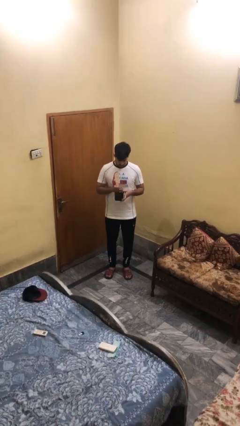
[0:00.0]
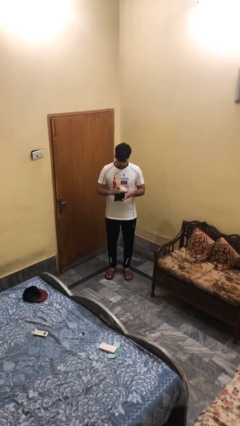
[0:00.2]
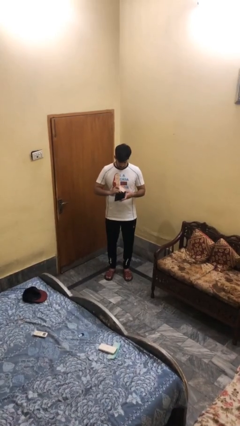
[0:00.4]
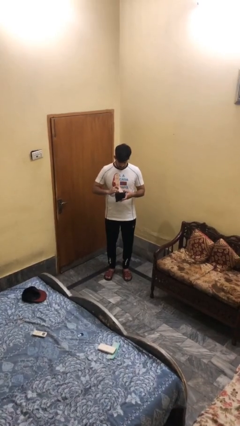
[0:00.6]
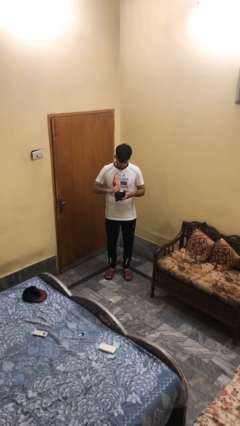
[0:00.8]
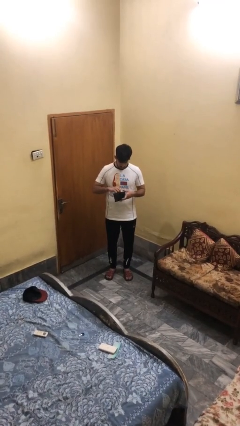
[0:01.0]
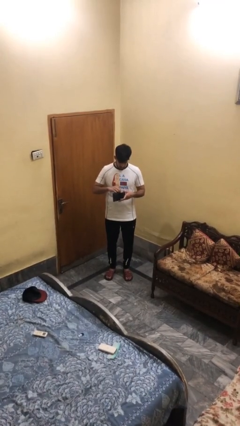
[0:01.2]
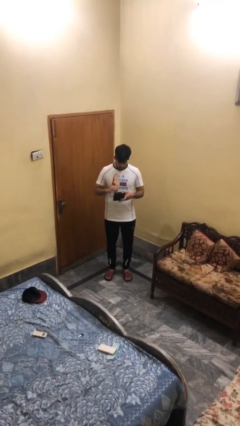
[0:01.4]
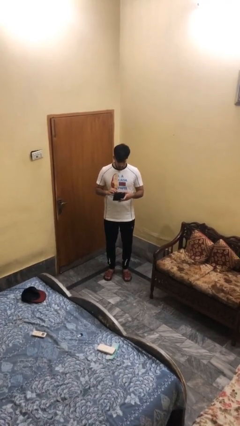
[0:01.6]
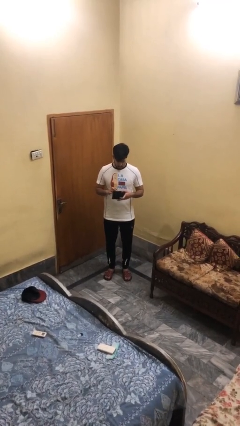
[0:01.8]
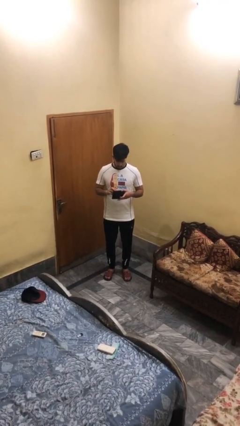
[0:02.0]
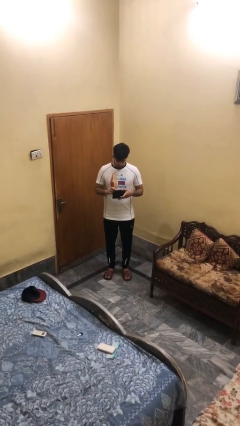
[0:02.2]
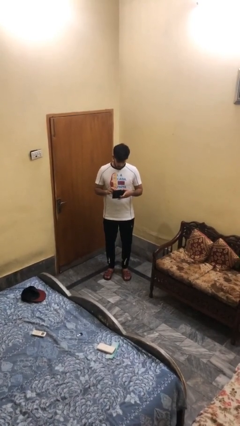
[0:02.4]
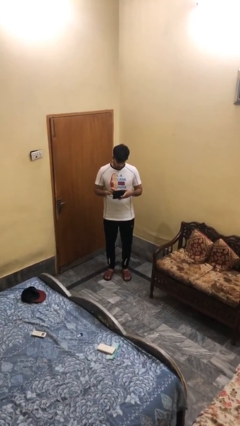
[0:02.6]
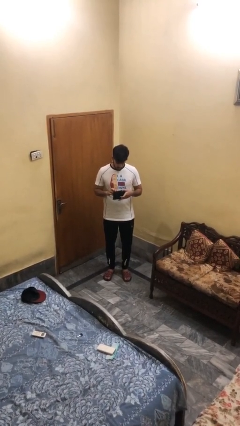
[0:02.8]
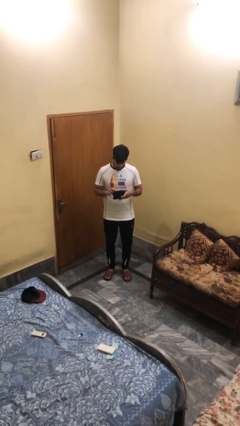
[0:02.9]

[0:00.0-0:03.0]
person puts object into purse

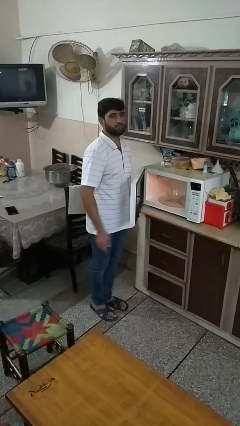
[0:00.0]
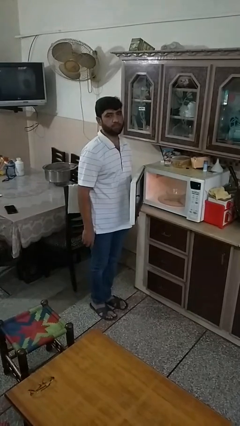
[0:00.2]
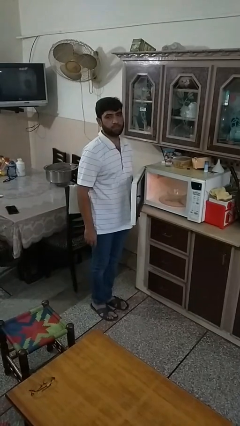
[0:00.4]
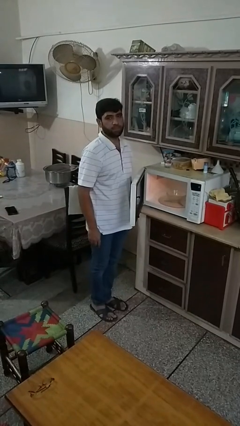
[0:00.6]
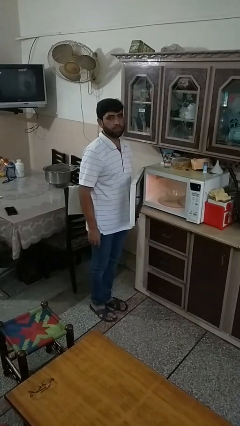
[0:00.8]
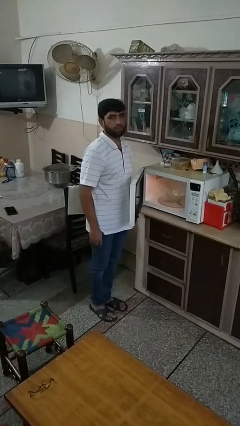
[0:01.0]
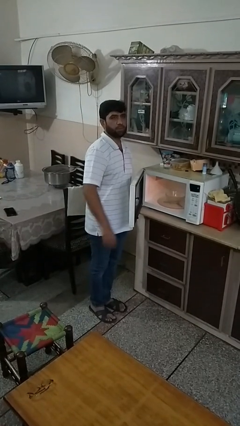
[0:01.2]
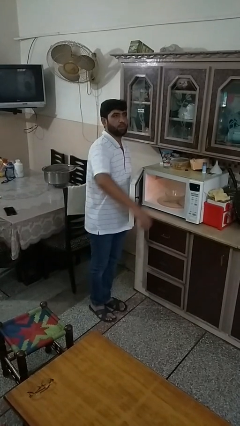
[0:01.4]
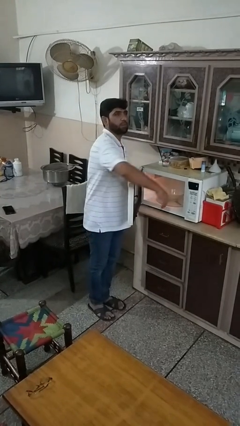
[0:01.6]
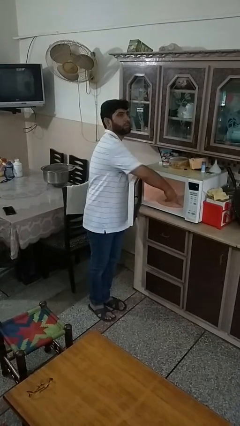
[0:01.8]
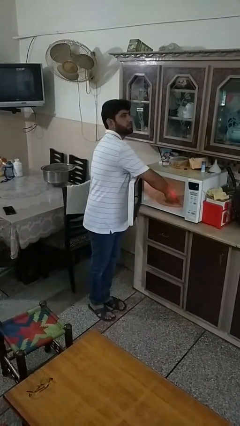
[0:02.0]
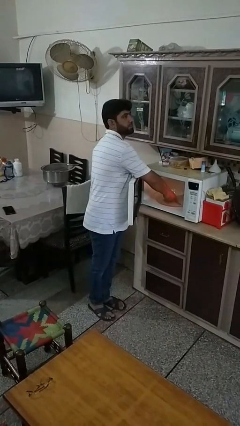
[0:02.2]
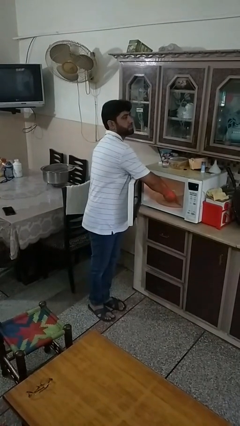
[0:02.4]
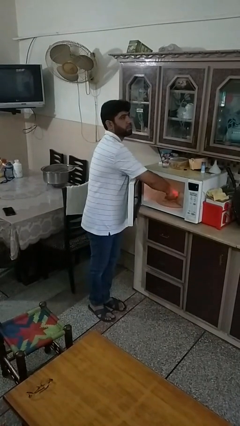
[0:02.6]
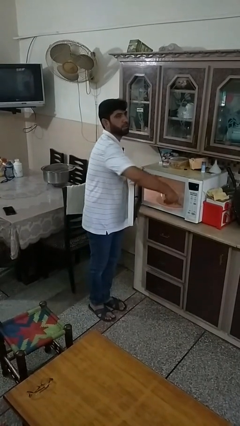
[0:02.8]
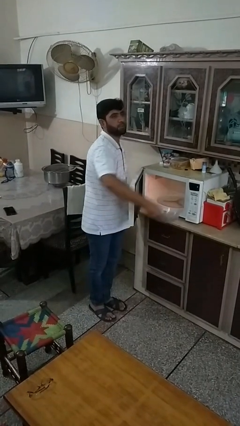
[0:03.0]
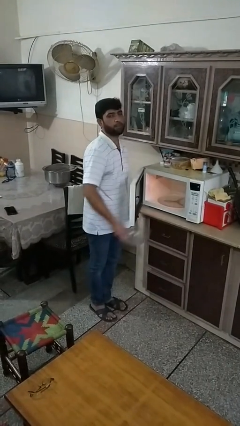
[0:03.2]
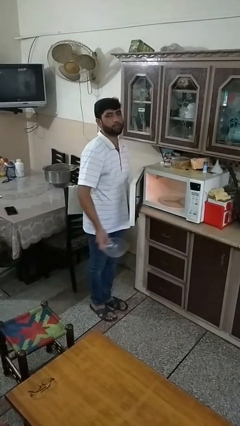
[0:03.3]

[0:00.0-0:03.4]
person takes object from microwave

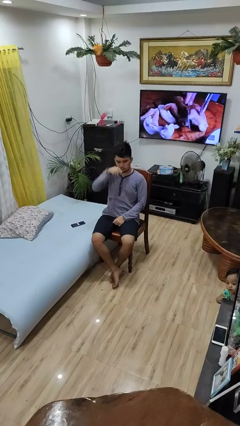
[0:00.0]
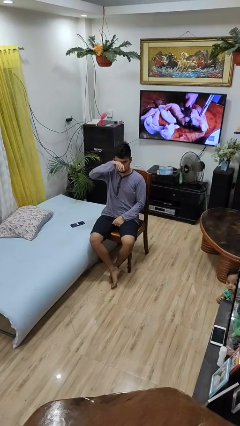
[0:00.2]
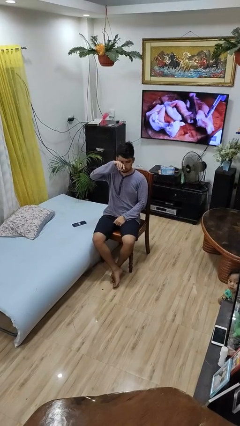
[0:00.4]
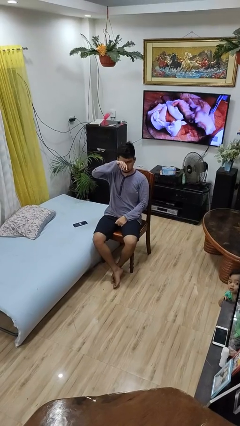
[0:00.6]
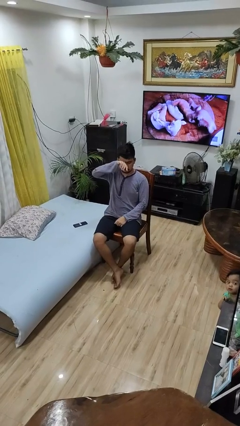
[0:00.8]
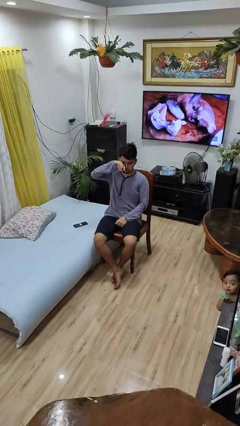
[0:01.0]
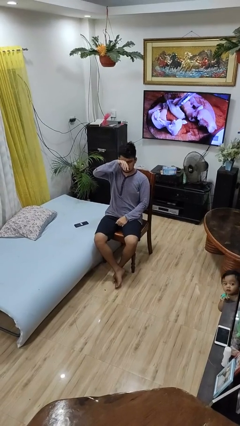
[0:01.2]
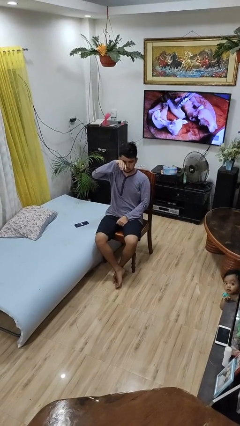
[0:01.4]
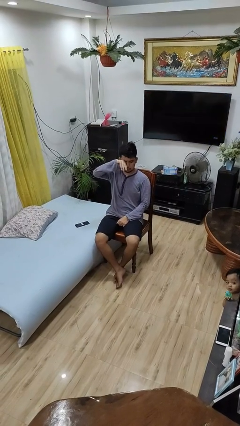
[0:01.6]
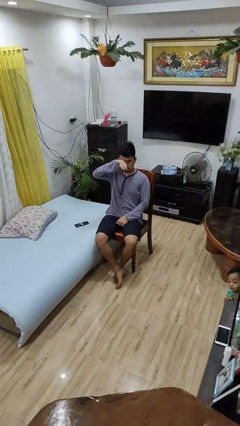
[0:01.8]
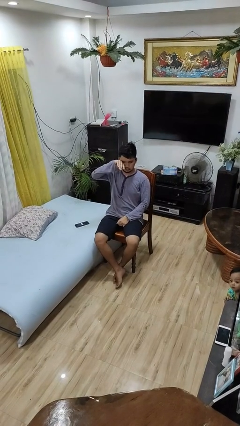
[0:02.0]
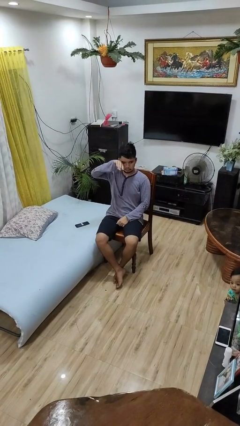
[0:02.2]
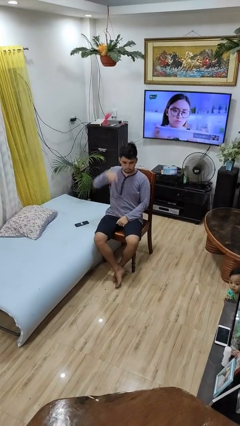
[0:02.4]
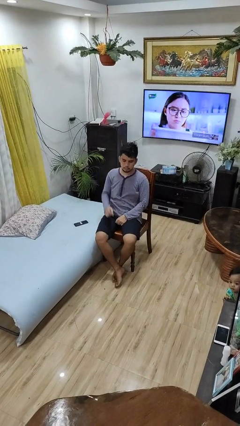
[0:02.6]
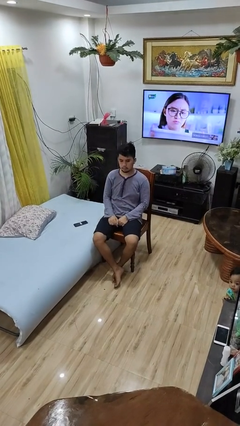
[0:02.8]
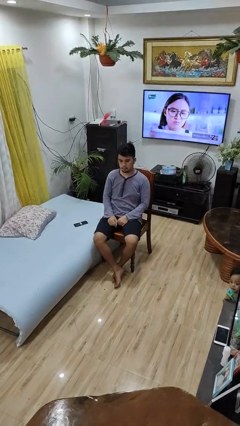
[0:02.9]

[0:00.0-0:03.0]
person rubs eyes

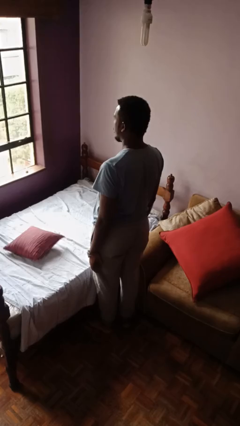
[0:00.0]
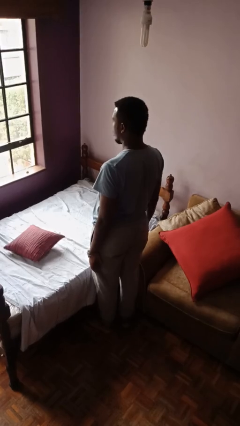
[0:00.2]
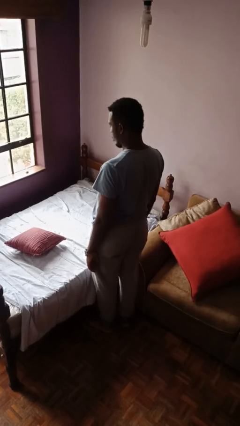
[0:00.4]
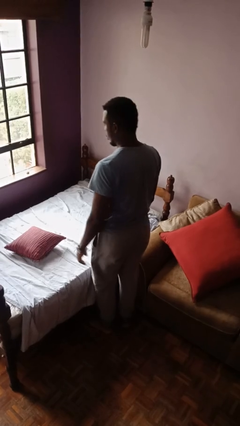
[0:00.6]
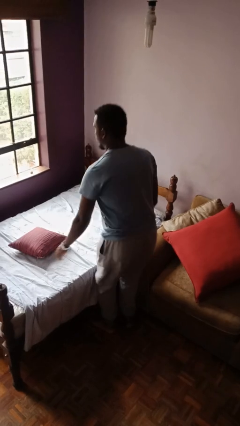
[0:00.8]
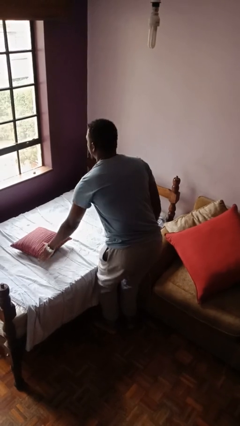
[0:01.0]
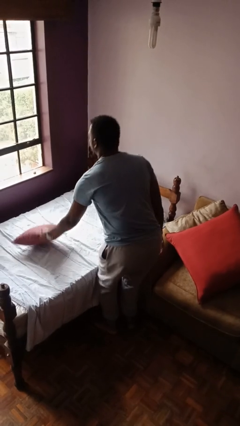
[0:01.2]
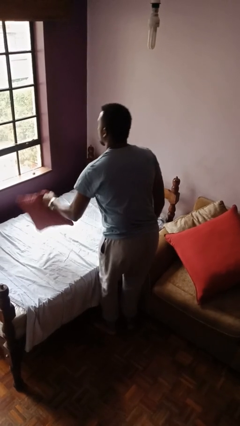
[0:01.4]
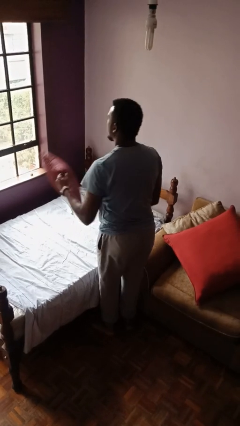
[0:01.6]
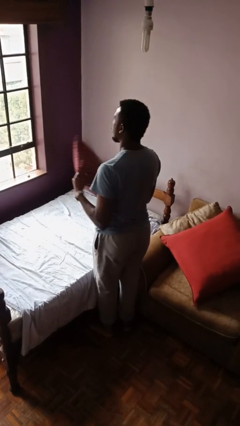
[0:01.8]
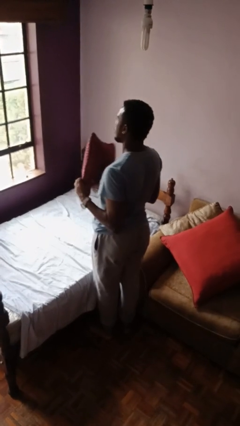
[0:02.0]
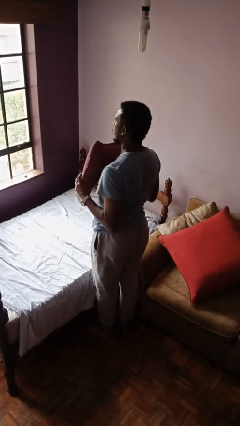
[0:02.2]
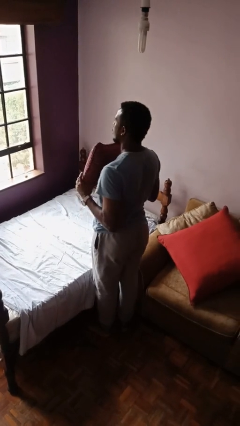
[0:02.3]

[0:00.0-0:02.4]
person picks up object from bed

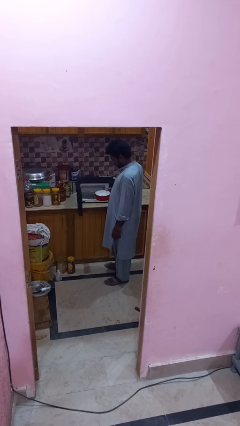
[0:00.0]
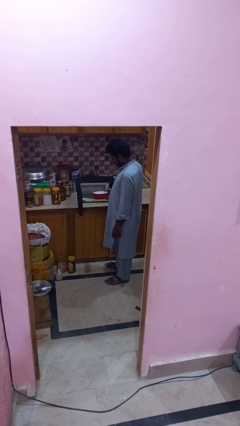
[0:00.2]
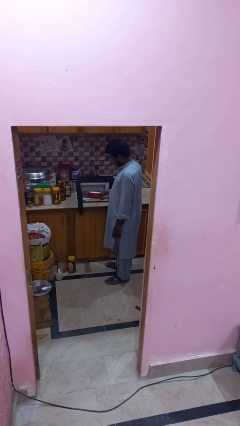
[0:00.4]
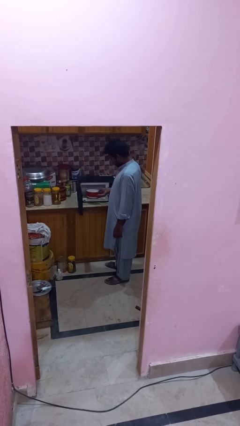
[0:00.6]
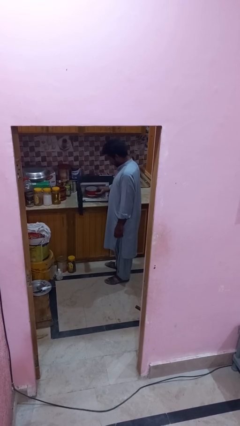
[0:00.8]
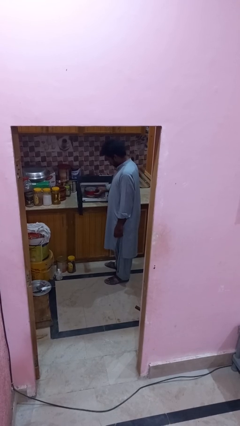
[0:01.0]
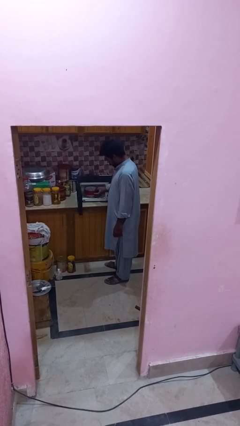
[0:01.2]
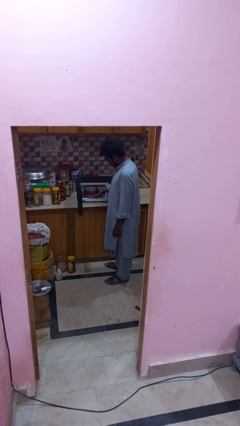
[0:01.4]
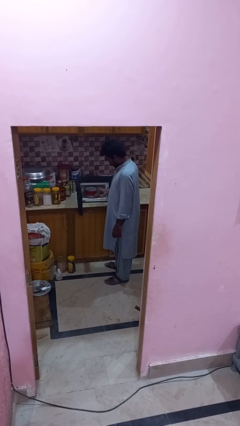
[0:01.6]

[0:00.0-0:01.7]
person puts object into microwave

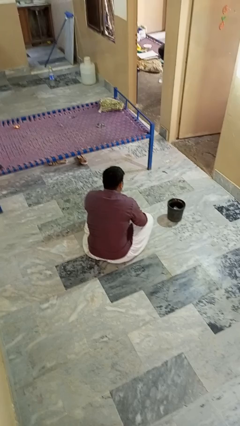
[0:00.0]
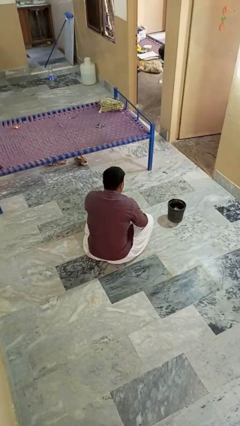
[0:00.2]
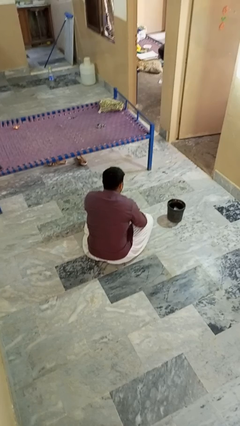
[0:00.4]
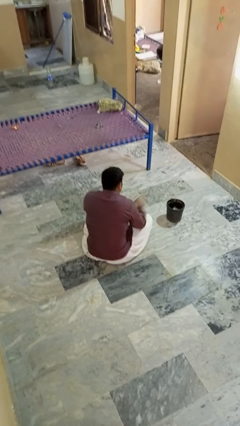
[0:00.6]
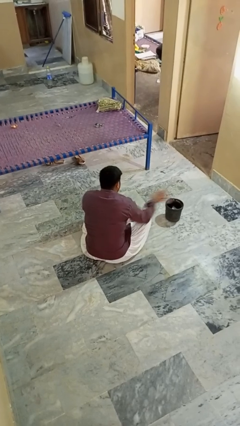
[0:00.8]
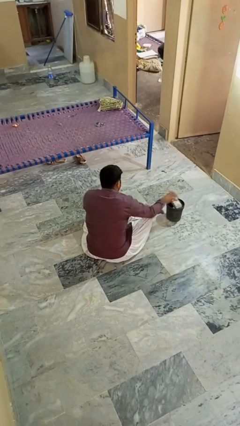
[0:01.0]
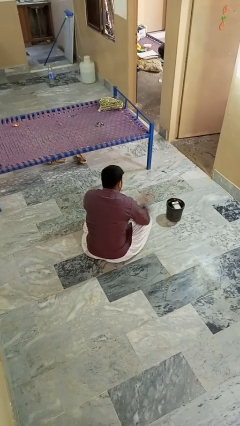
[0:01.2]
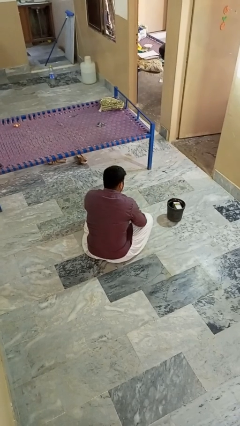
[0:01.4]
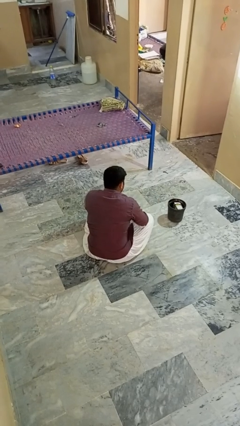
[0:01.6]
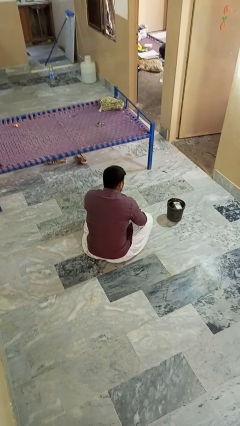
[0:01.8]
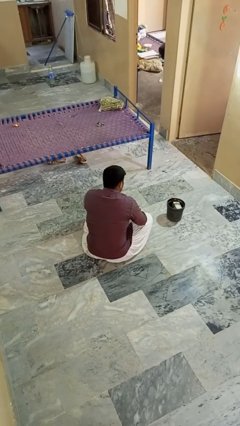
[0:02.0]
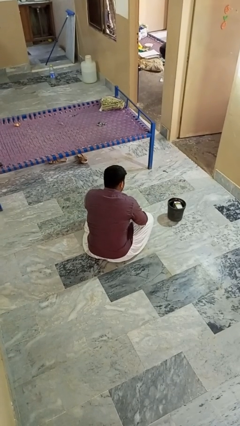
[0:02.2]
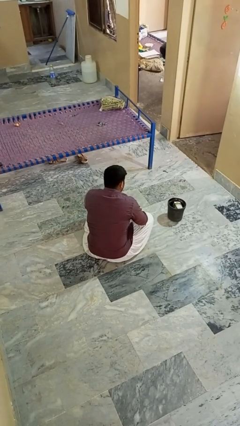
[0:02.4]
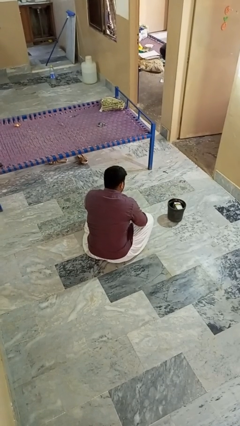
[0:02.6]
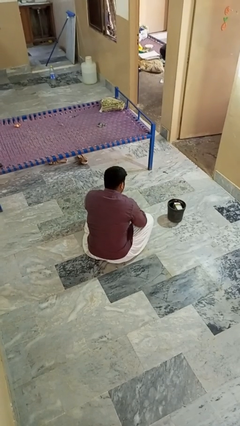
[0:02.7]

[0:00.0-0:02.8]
person puts object into basket

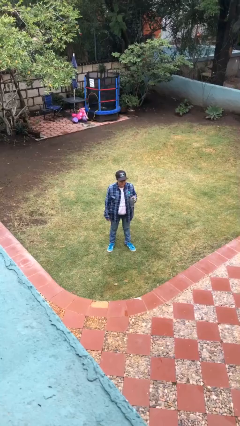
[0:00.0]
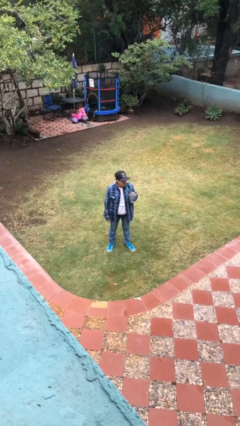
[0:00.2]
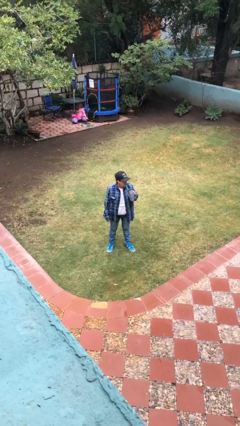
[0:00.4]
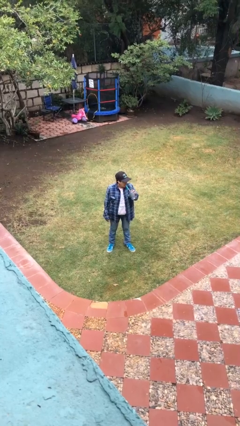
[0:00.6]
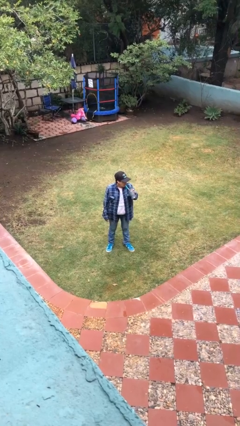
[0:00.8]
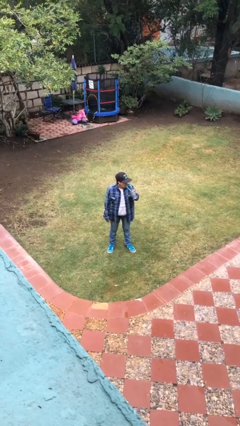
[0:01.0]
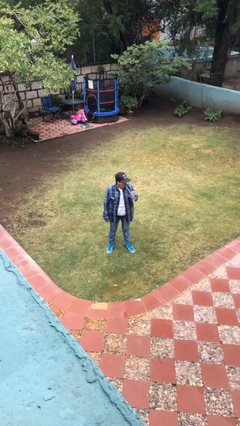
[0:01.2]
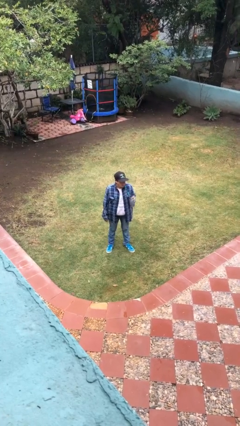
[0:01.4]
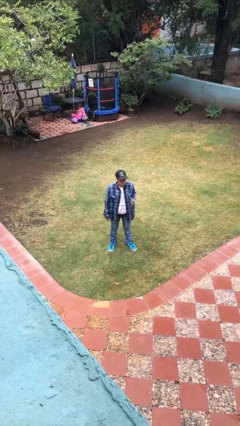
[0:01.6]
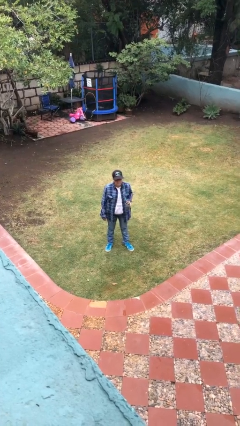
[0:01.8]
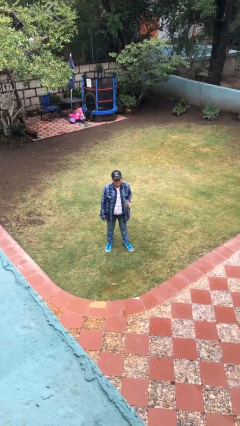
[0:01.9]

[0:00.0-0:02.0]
person drinks from straw
